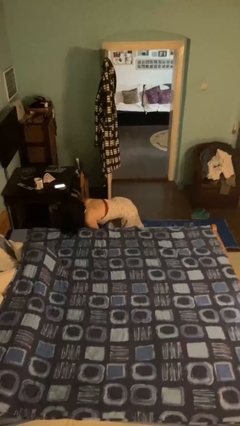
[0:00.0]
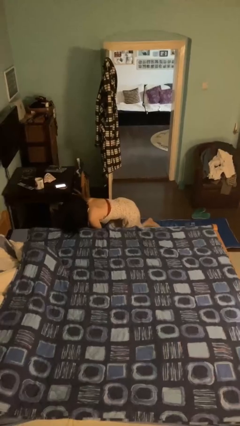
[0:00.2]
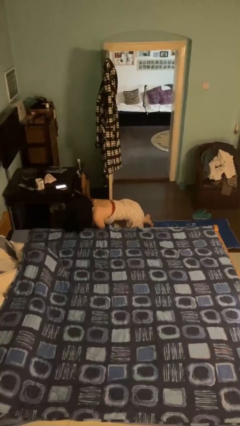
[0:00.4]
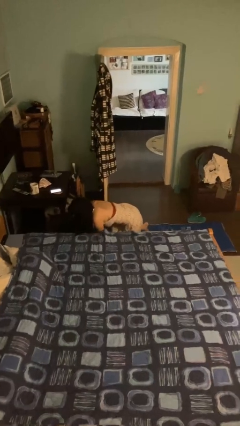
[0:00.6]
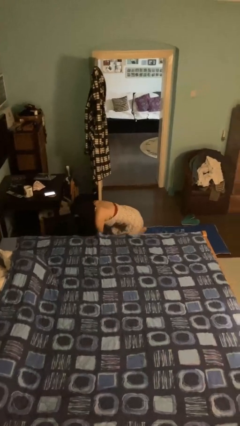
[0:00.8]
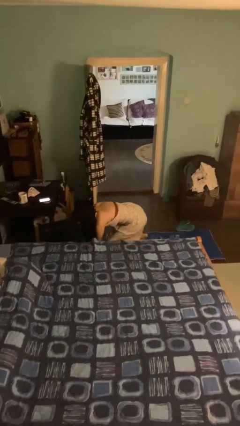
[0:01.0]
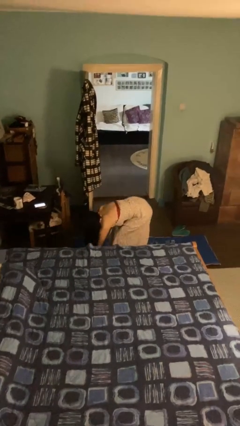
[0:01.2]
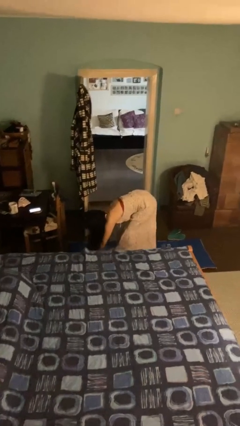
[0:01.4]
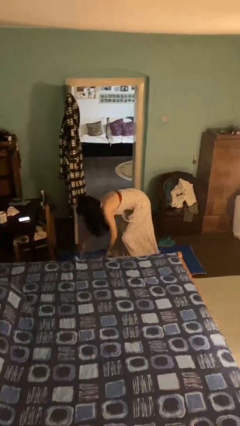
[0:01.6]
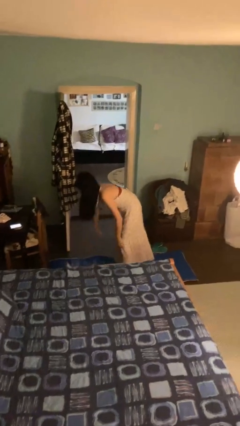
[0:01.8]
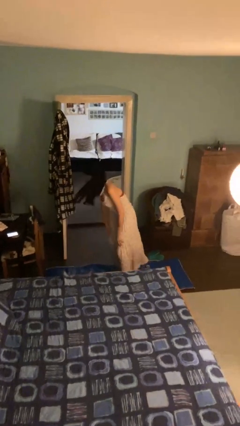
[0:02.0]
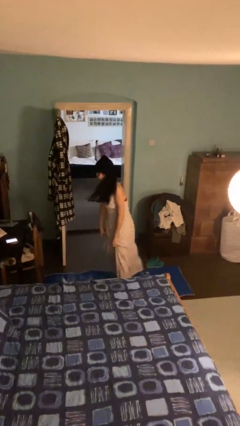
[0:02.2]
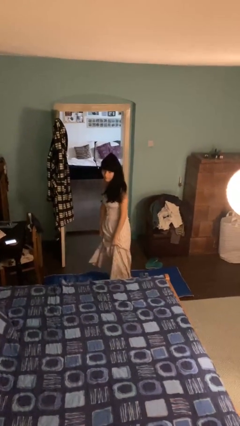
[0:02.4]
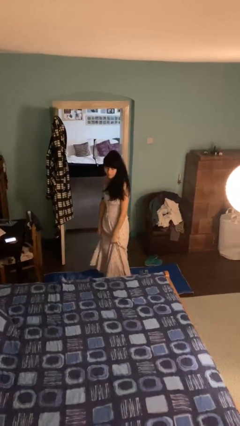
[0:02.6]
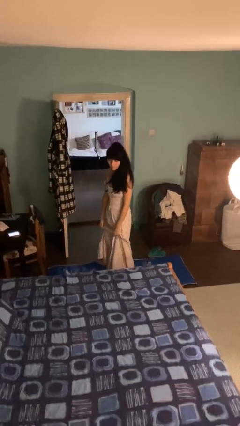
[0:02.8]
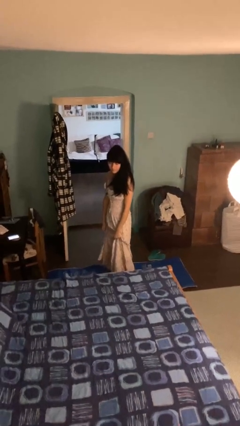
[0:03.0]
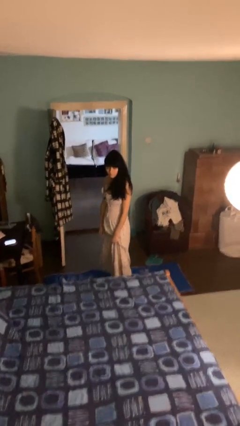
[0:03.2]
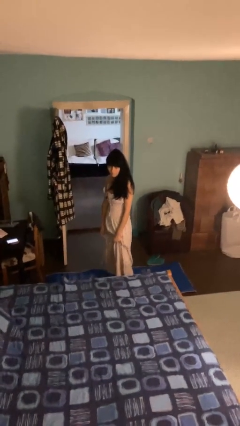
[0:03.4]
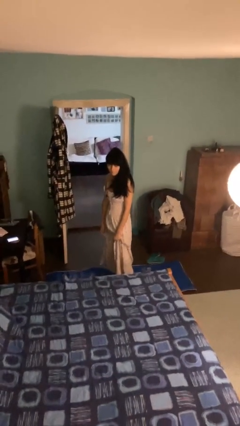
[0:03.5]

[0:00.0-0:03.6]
person stands up from floor

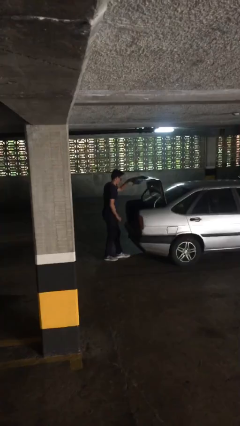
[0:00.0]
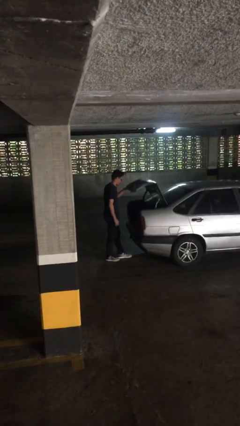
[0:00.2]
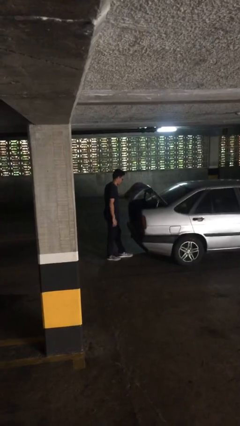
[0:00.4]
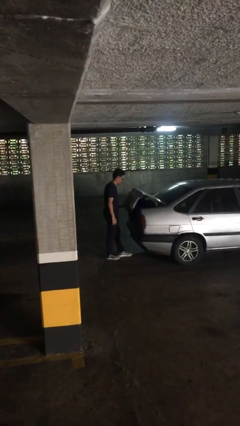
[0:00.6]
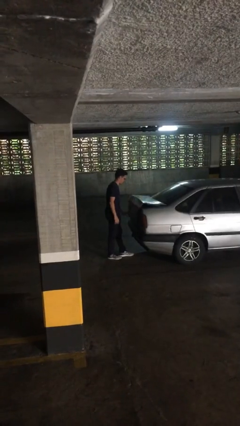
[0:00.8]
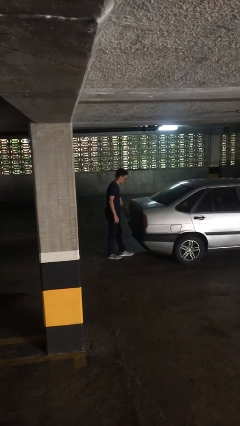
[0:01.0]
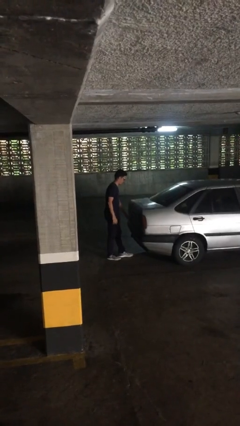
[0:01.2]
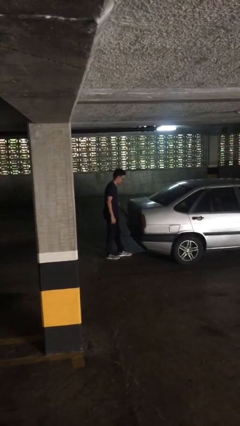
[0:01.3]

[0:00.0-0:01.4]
person closes car trunk

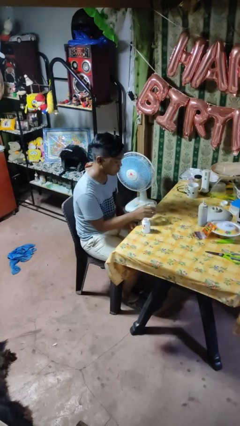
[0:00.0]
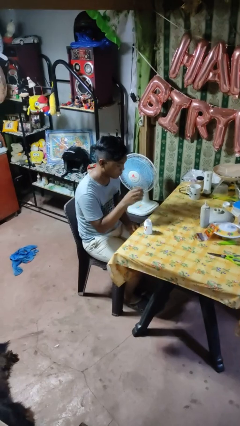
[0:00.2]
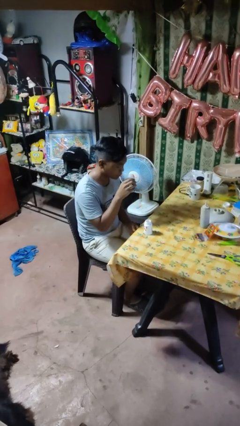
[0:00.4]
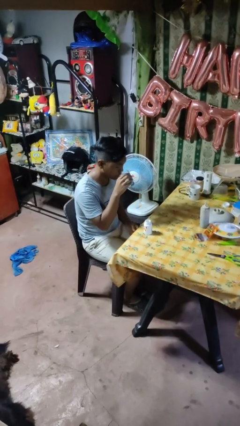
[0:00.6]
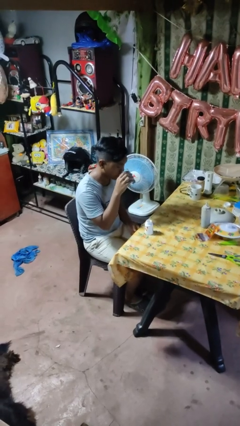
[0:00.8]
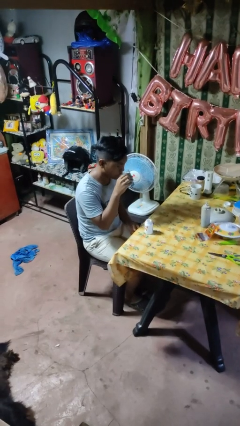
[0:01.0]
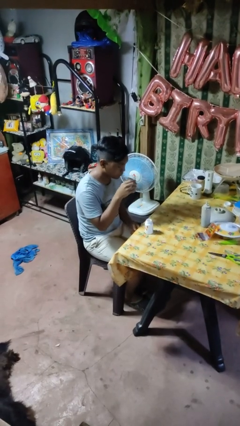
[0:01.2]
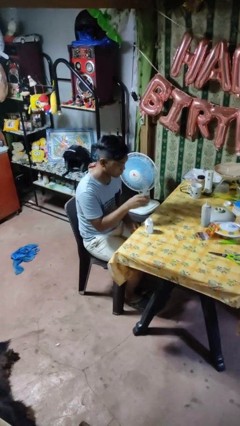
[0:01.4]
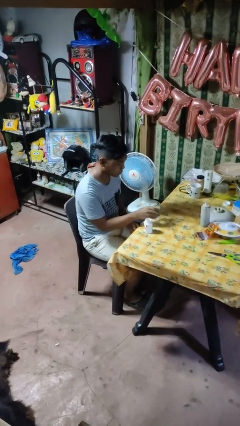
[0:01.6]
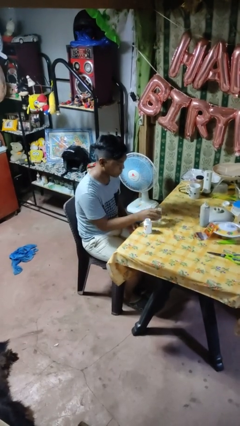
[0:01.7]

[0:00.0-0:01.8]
person drinks from cup

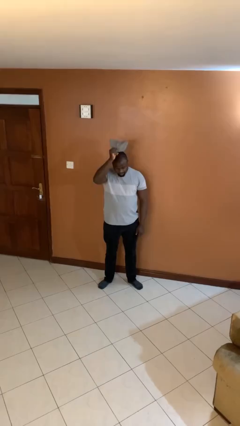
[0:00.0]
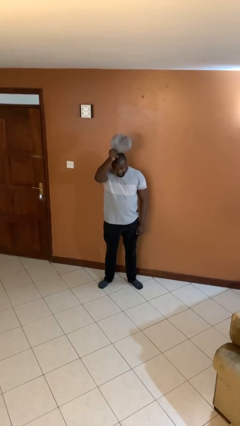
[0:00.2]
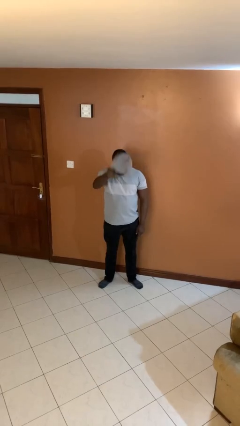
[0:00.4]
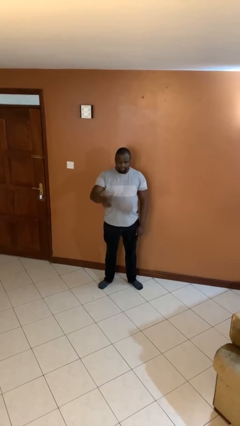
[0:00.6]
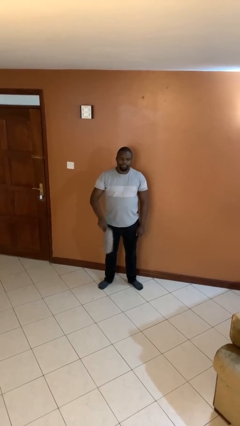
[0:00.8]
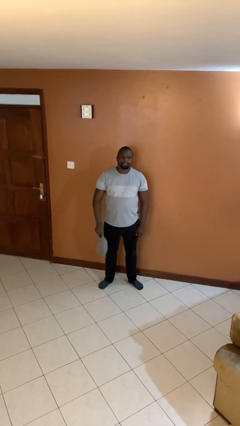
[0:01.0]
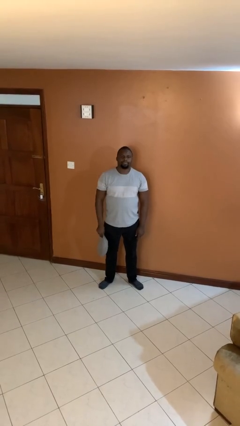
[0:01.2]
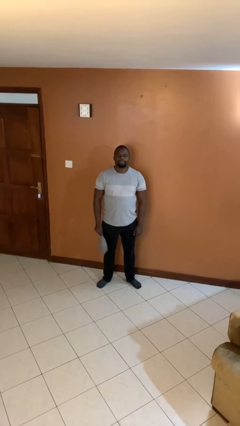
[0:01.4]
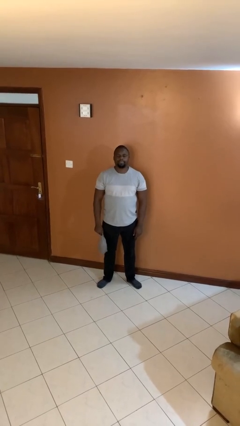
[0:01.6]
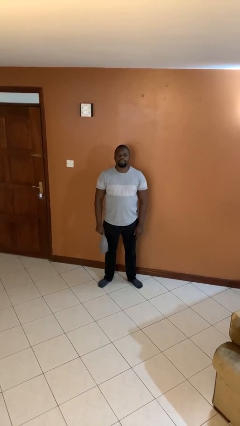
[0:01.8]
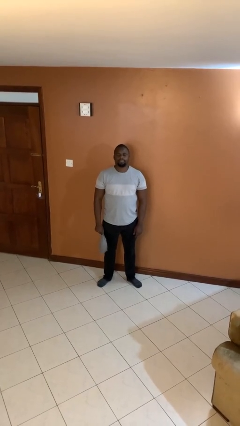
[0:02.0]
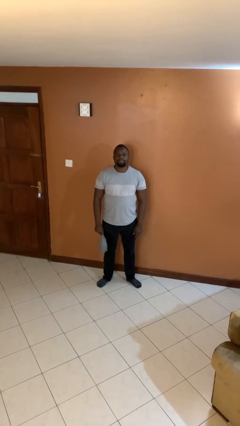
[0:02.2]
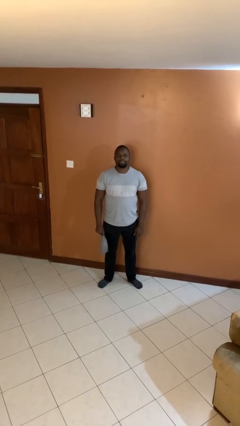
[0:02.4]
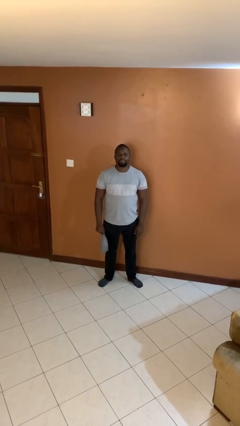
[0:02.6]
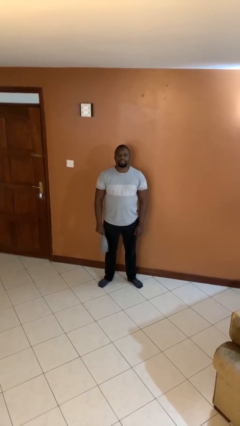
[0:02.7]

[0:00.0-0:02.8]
person takes off hat

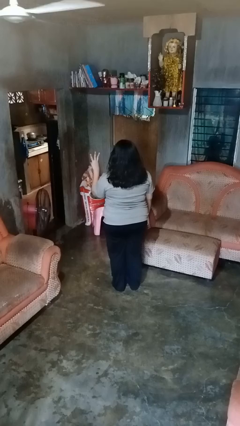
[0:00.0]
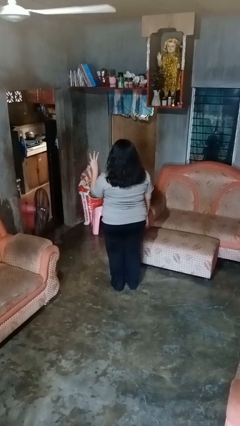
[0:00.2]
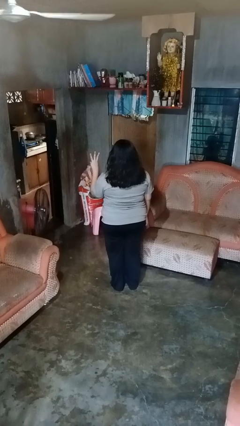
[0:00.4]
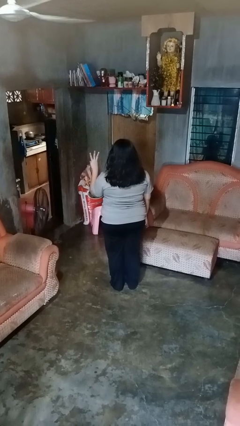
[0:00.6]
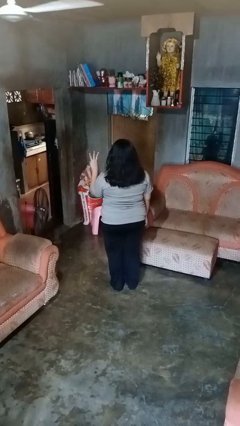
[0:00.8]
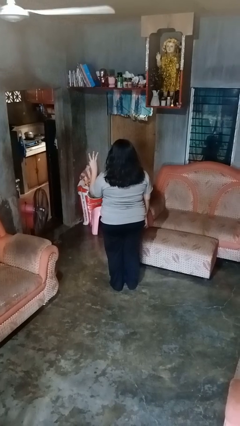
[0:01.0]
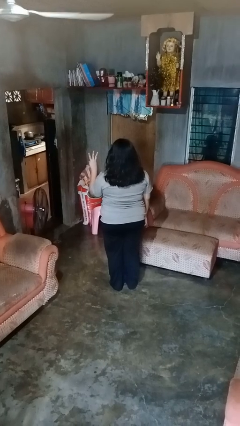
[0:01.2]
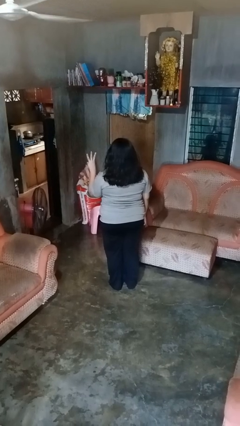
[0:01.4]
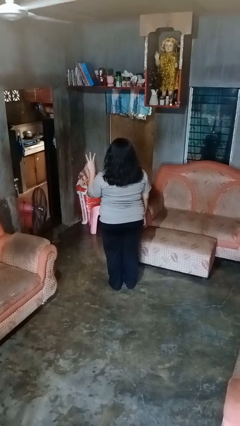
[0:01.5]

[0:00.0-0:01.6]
person gestures number three

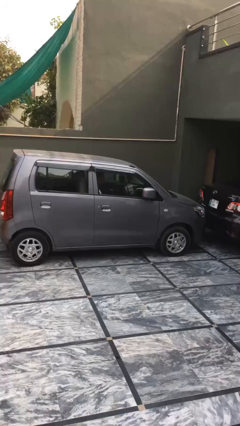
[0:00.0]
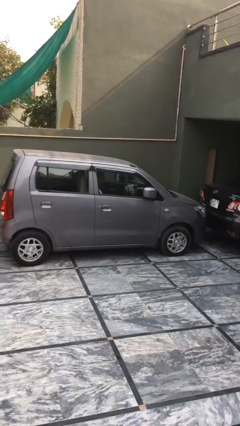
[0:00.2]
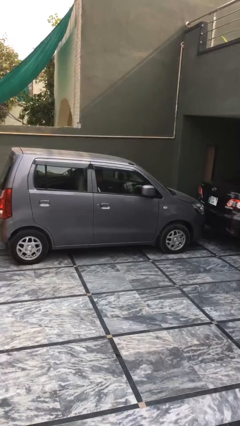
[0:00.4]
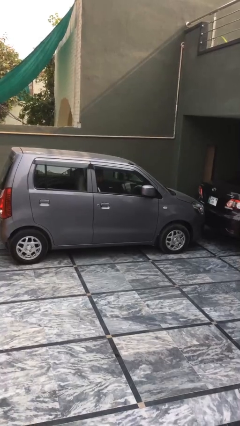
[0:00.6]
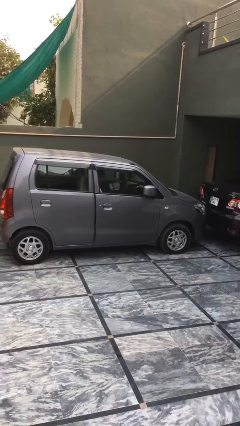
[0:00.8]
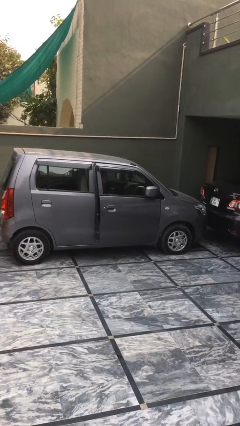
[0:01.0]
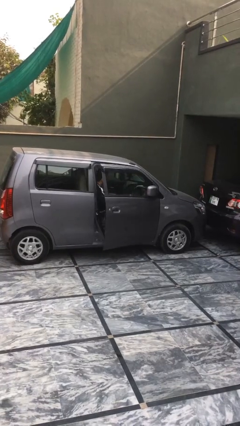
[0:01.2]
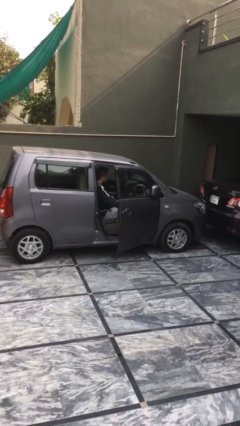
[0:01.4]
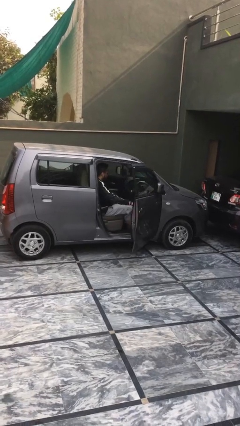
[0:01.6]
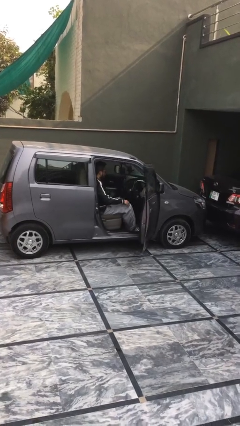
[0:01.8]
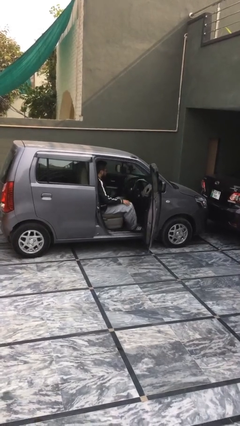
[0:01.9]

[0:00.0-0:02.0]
person opens car door

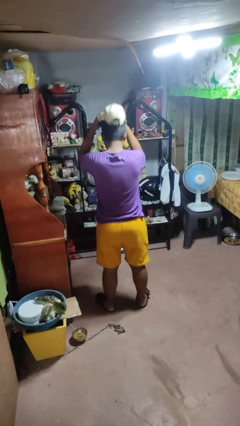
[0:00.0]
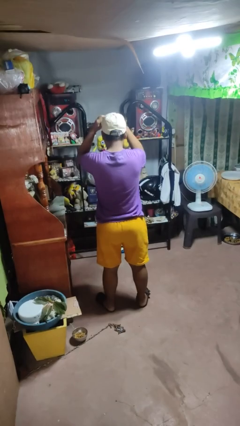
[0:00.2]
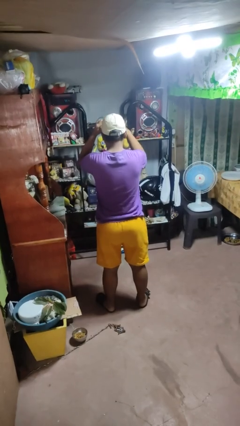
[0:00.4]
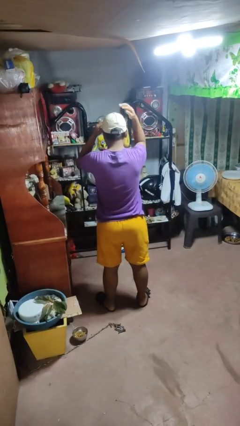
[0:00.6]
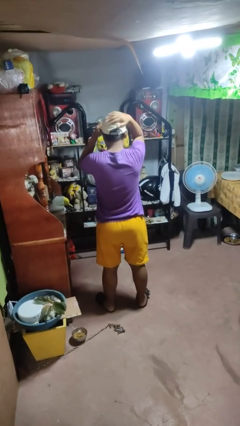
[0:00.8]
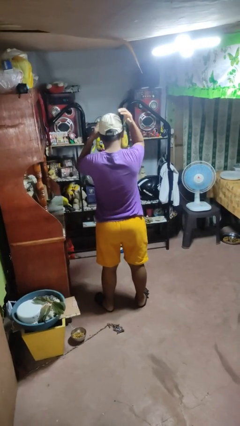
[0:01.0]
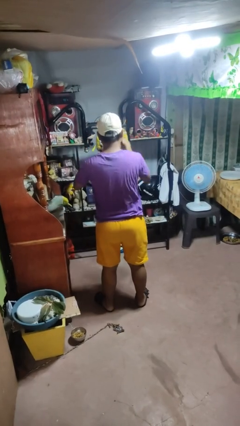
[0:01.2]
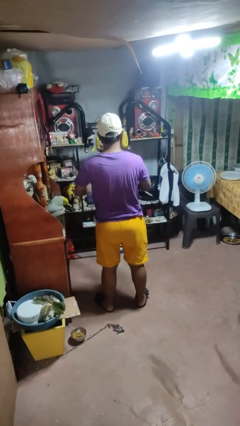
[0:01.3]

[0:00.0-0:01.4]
person puts on hat

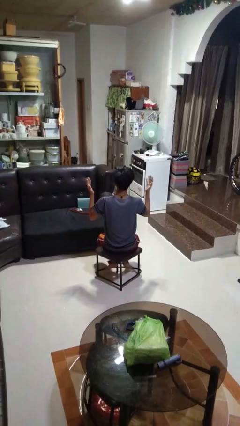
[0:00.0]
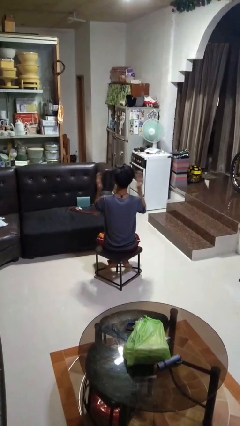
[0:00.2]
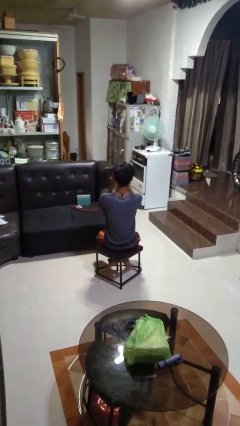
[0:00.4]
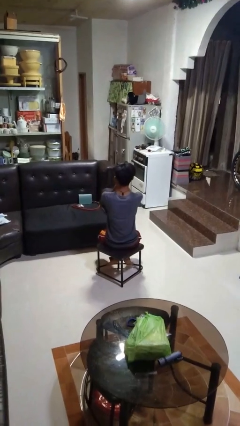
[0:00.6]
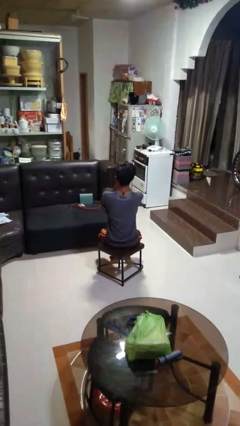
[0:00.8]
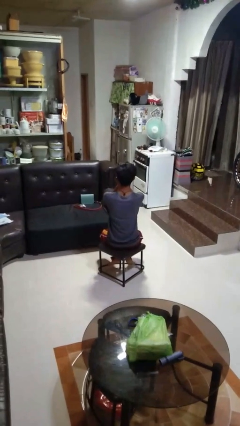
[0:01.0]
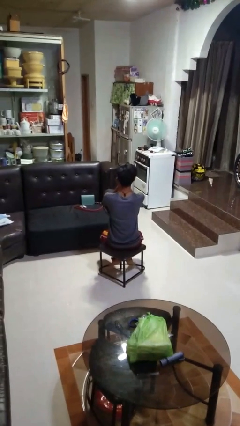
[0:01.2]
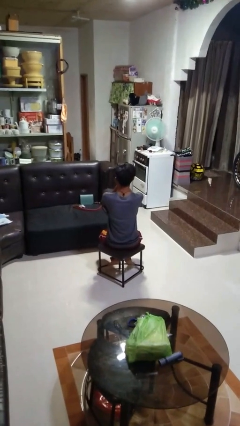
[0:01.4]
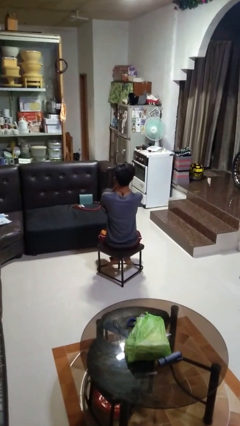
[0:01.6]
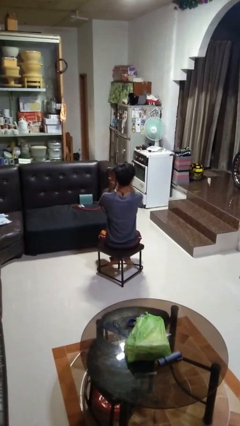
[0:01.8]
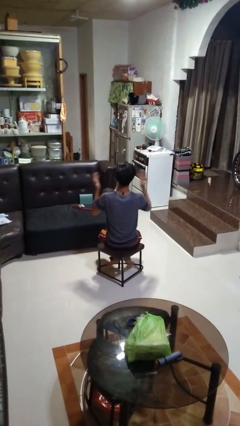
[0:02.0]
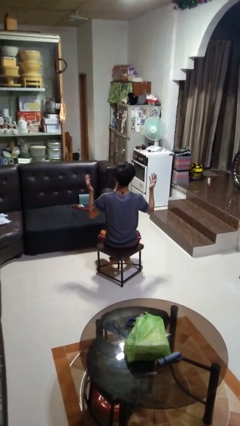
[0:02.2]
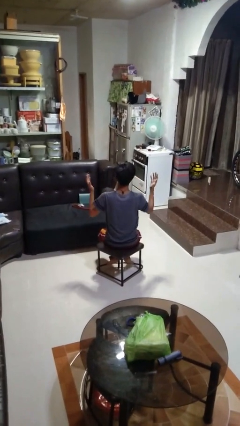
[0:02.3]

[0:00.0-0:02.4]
person covers face with hands
